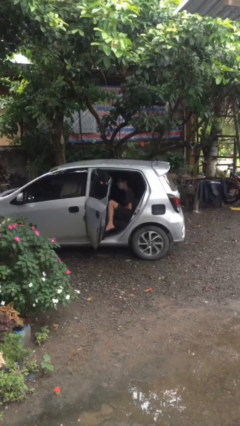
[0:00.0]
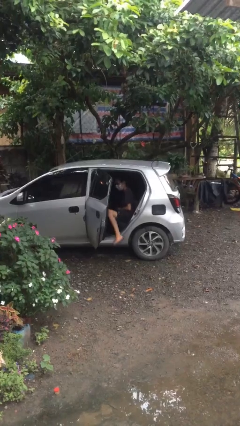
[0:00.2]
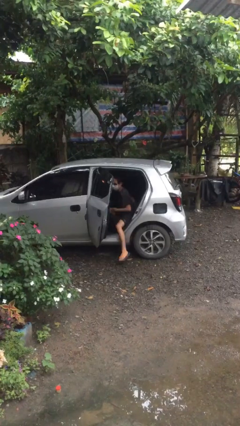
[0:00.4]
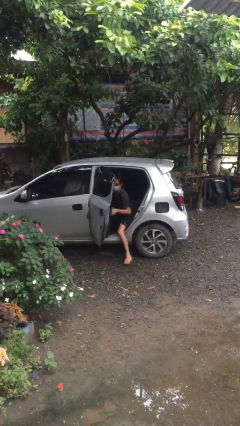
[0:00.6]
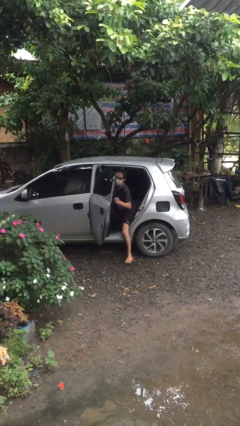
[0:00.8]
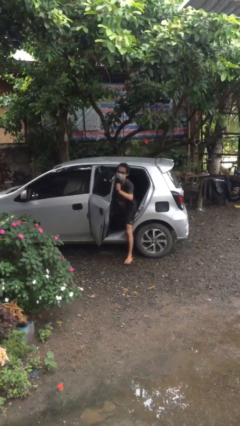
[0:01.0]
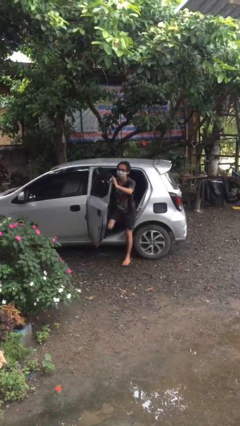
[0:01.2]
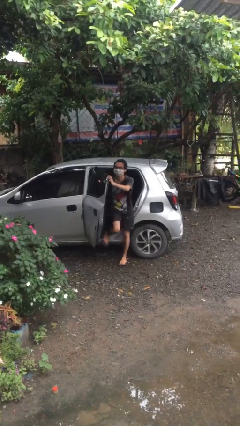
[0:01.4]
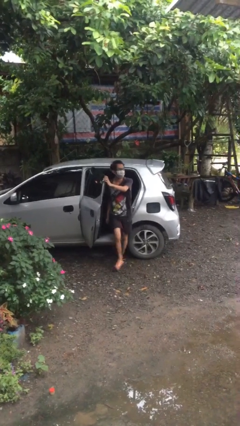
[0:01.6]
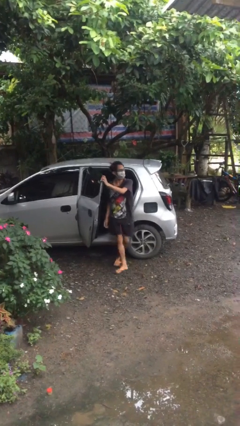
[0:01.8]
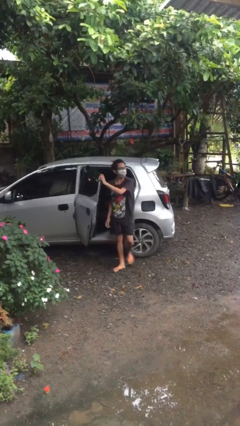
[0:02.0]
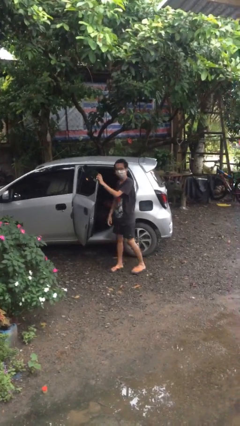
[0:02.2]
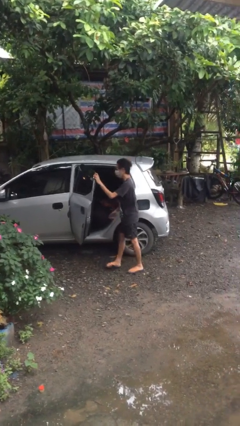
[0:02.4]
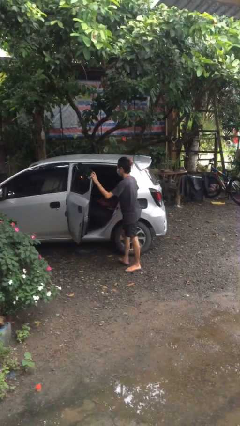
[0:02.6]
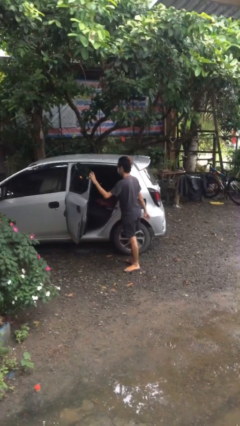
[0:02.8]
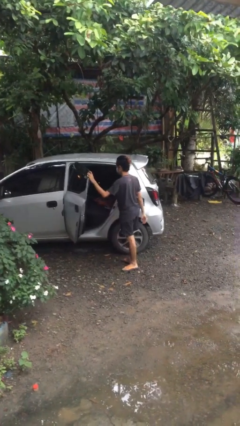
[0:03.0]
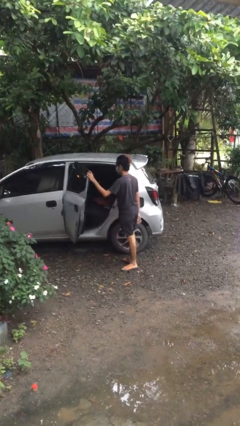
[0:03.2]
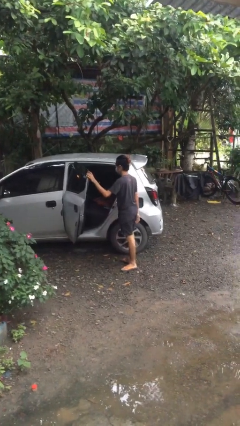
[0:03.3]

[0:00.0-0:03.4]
person exits car

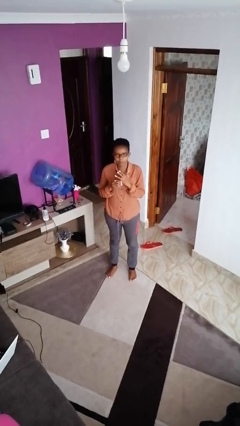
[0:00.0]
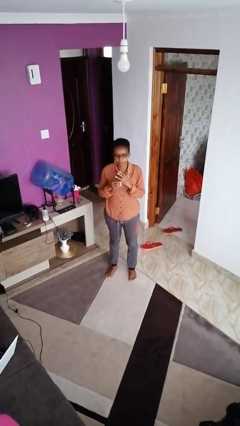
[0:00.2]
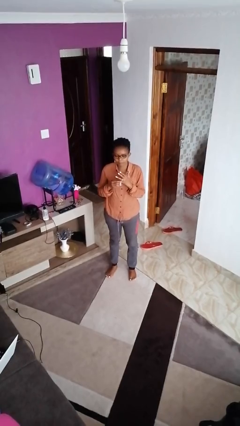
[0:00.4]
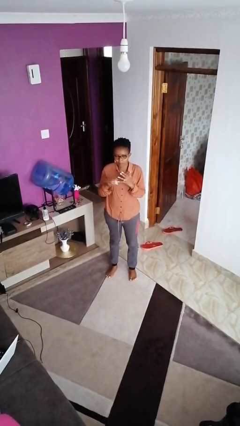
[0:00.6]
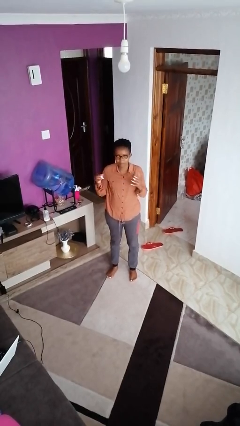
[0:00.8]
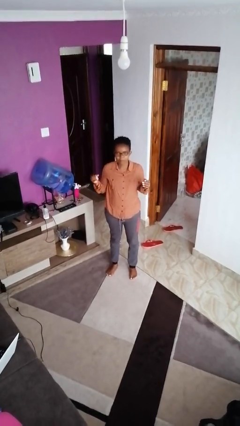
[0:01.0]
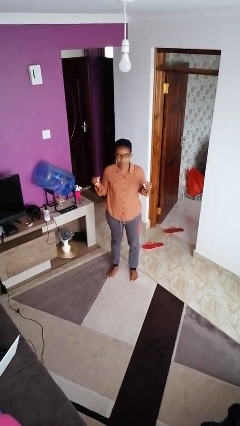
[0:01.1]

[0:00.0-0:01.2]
person takes off ring

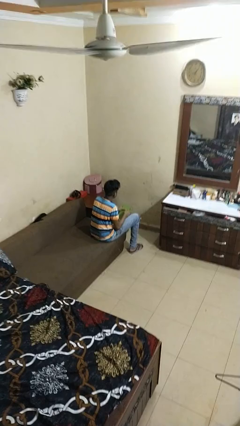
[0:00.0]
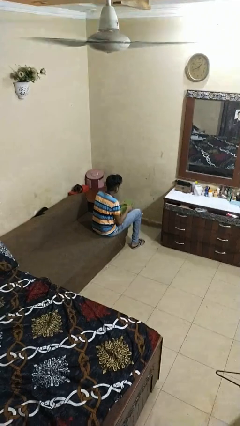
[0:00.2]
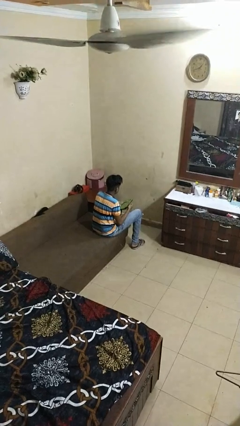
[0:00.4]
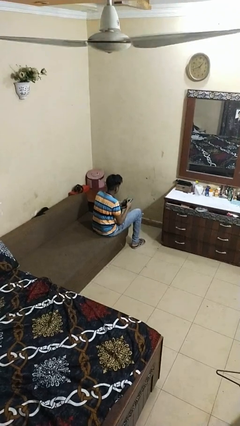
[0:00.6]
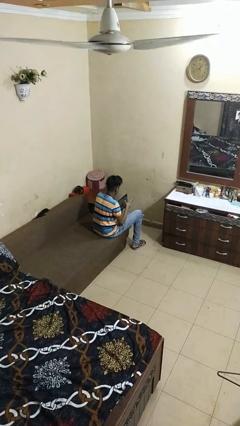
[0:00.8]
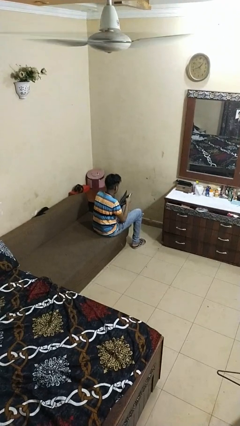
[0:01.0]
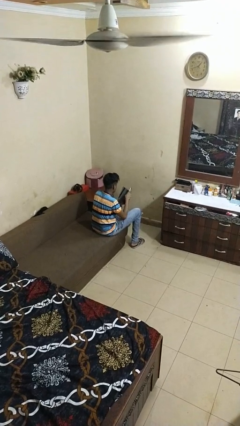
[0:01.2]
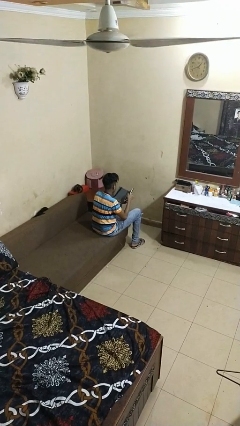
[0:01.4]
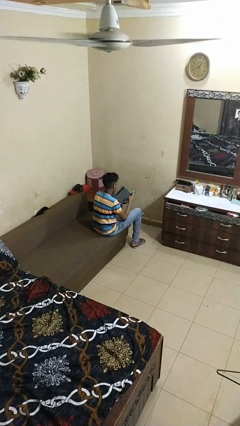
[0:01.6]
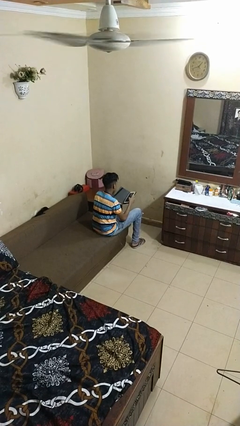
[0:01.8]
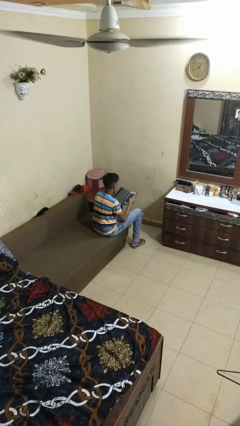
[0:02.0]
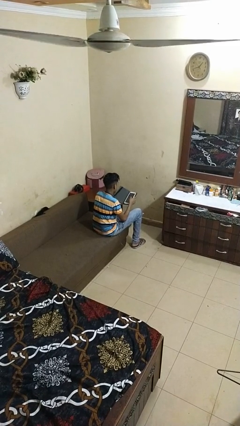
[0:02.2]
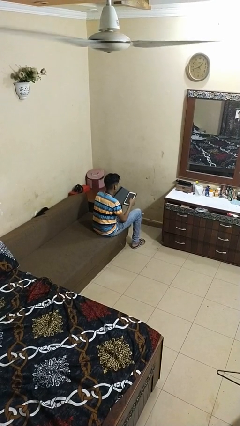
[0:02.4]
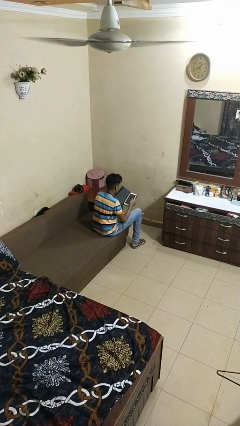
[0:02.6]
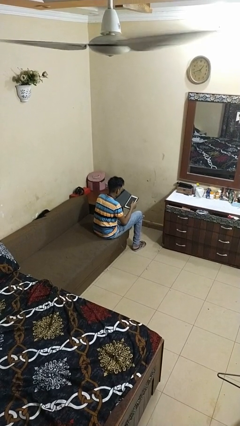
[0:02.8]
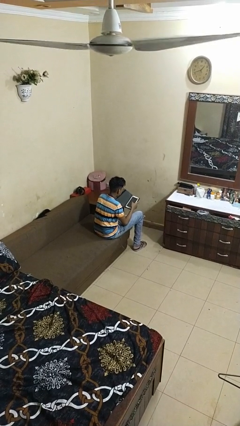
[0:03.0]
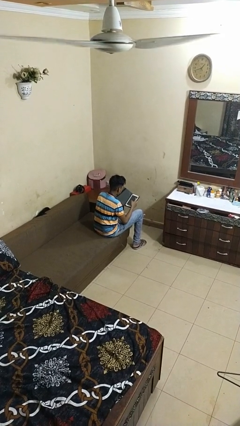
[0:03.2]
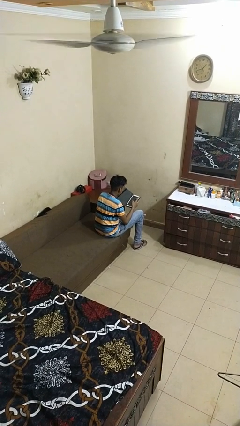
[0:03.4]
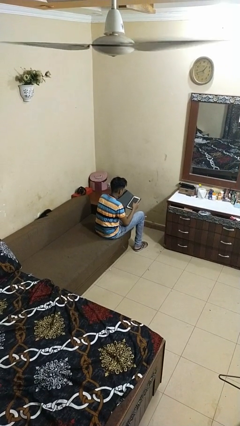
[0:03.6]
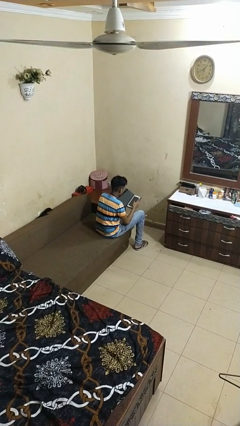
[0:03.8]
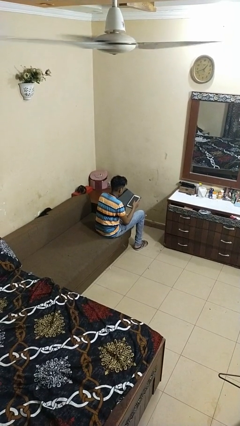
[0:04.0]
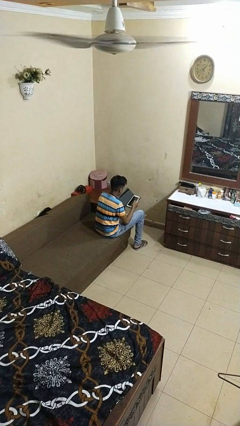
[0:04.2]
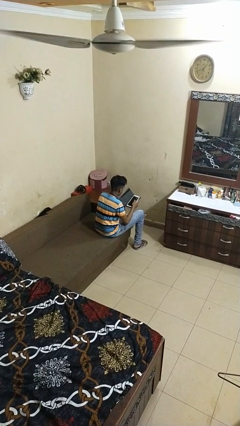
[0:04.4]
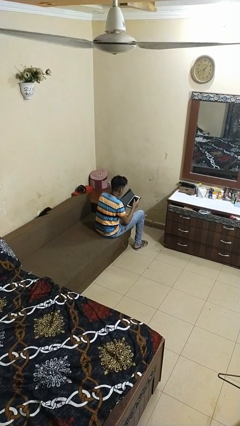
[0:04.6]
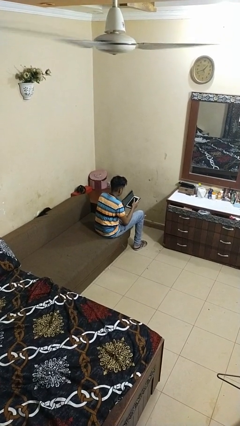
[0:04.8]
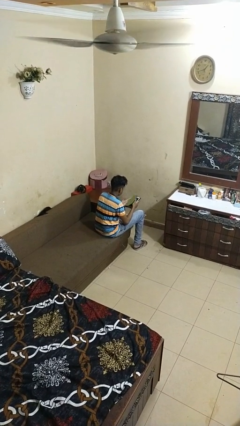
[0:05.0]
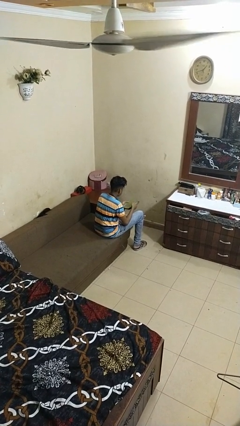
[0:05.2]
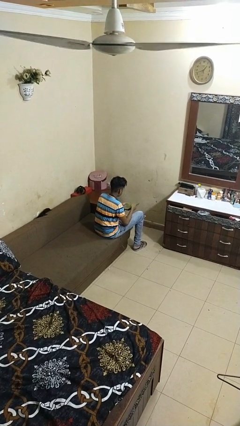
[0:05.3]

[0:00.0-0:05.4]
person interacts with tablet

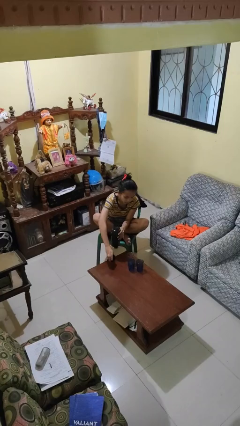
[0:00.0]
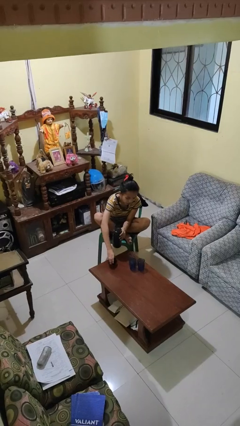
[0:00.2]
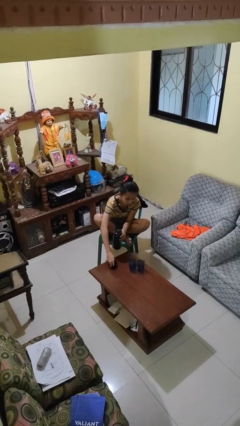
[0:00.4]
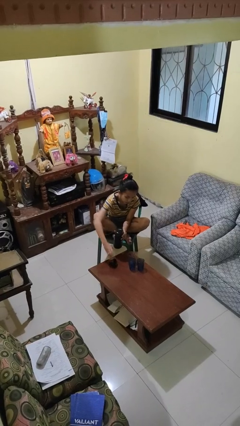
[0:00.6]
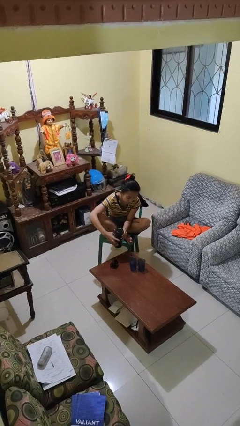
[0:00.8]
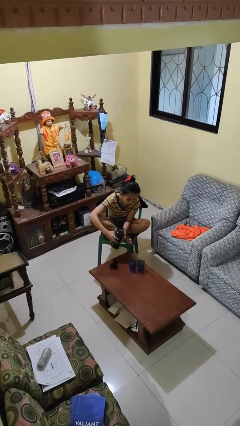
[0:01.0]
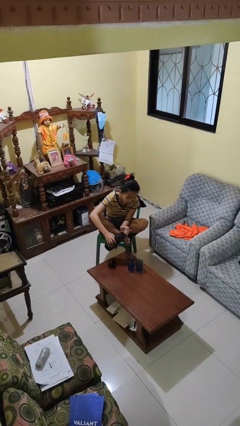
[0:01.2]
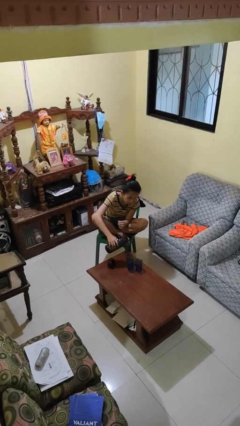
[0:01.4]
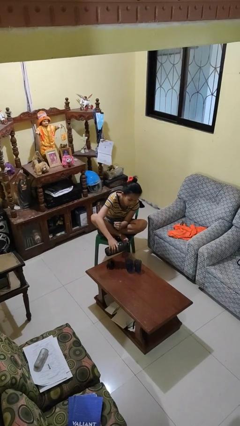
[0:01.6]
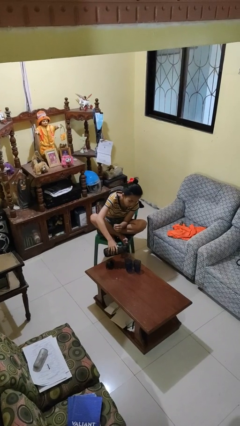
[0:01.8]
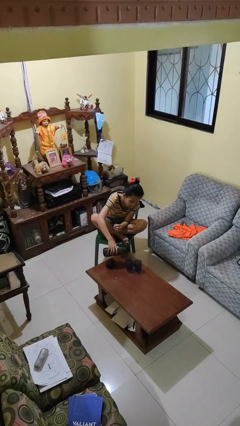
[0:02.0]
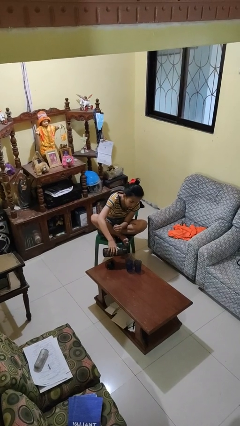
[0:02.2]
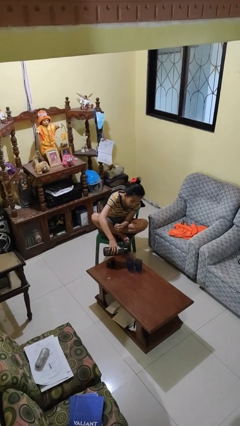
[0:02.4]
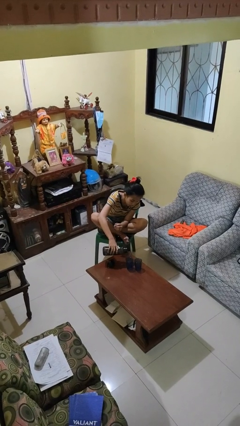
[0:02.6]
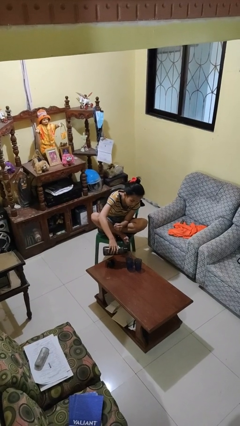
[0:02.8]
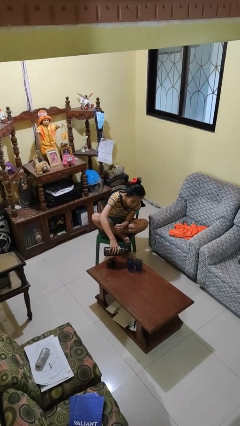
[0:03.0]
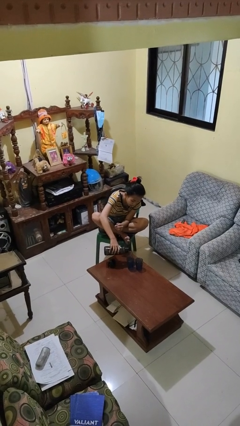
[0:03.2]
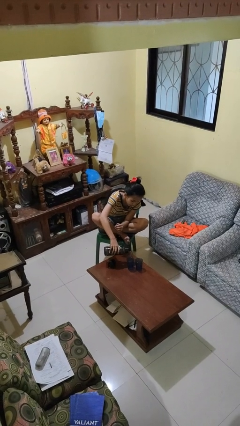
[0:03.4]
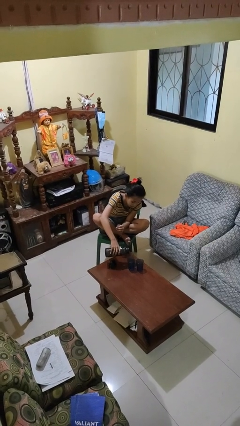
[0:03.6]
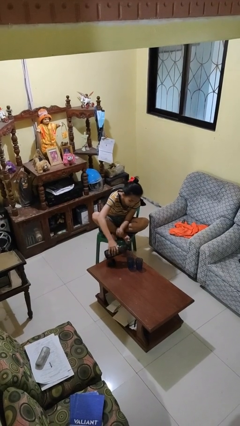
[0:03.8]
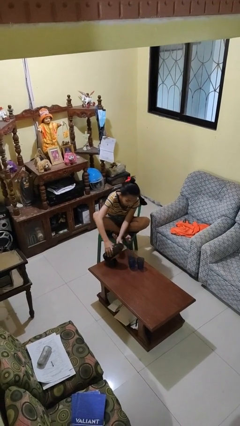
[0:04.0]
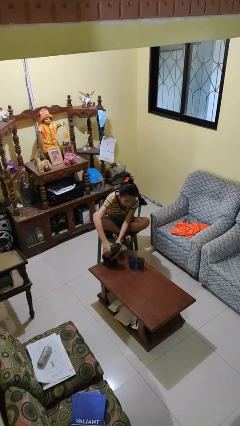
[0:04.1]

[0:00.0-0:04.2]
person pours liquid into cup

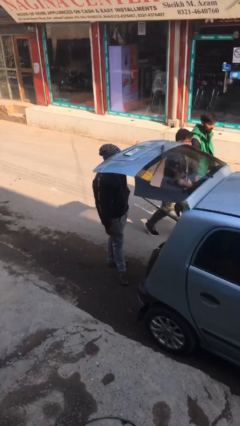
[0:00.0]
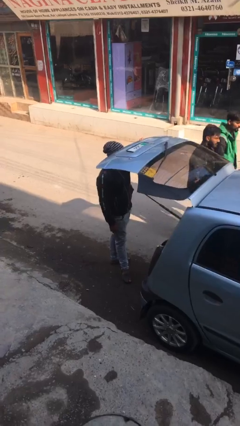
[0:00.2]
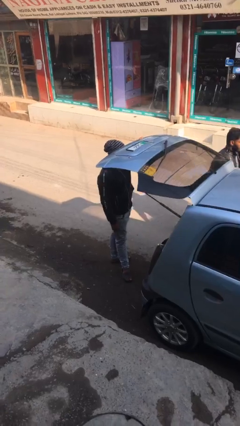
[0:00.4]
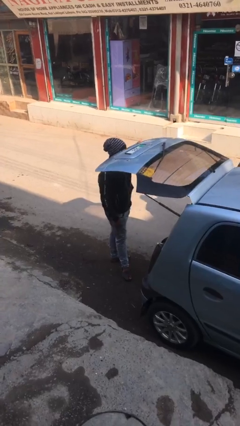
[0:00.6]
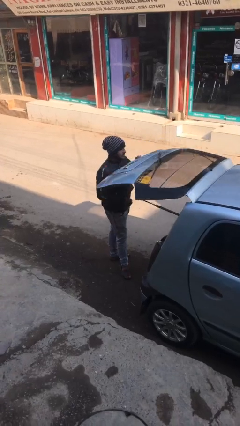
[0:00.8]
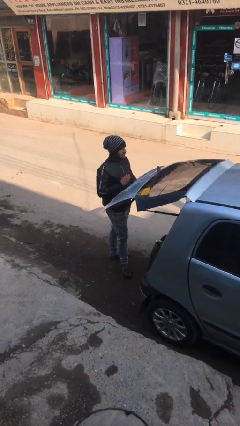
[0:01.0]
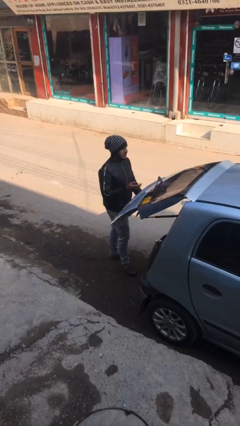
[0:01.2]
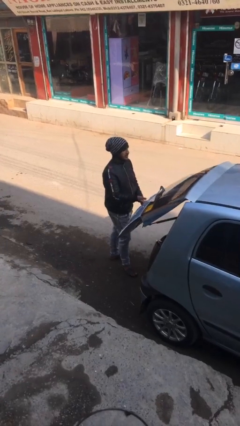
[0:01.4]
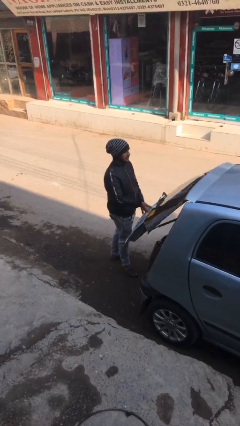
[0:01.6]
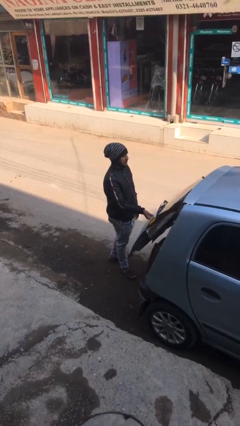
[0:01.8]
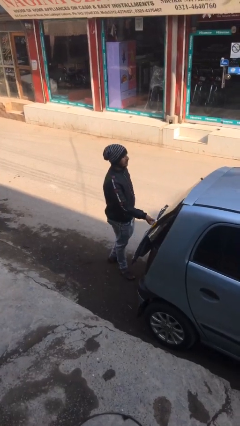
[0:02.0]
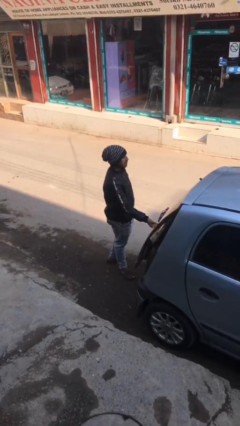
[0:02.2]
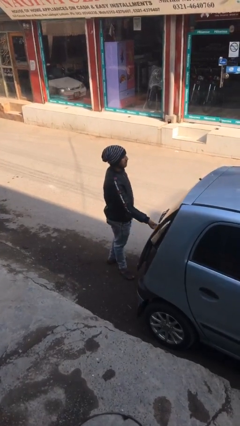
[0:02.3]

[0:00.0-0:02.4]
person closes car trunk

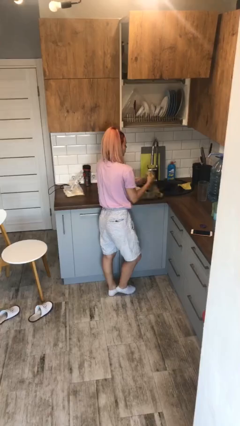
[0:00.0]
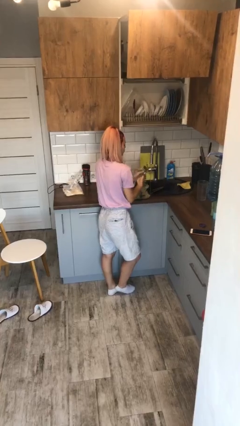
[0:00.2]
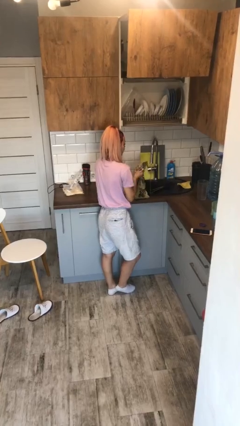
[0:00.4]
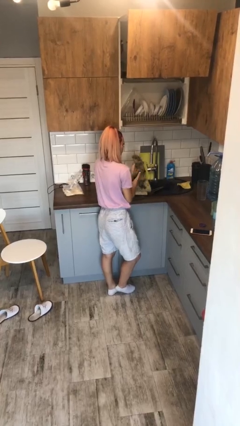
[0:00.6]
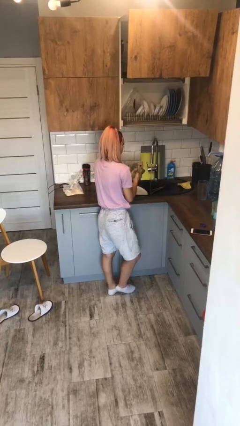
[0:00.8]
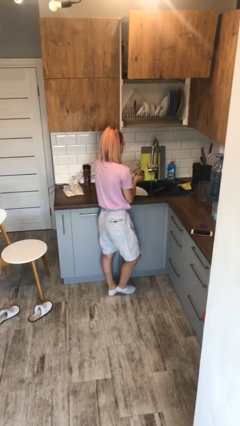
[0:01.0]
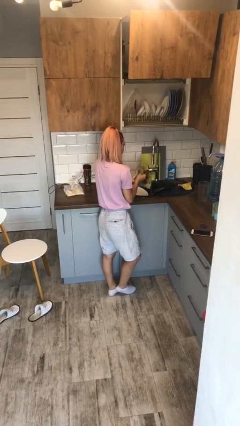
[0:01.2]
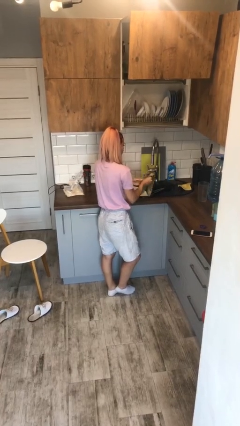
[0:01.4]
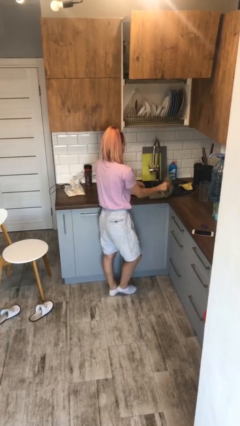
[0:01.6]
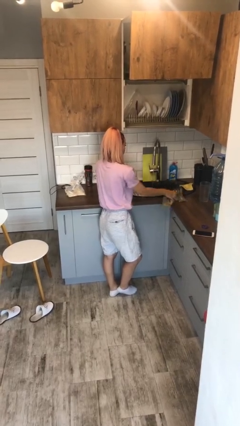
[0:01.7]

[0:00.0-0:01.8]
person dries hands with towel
